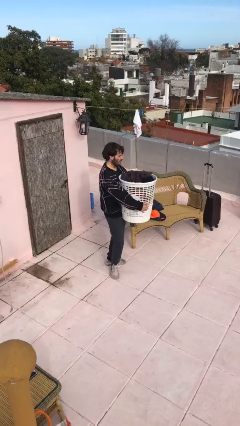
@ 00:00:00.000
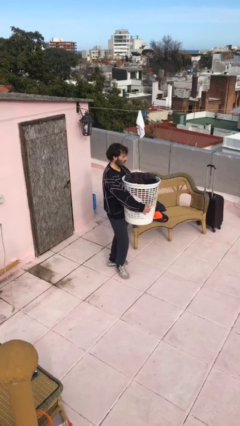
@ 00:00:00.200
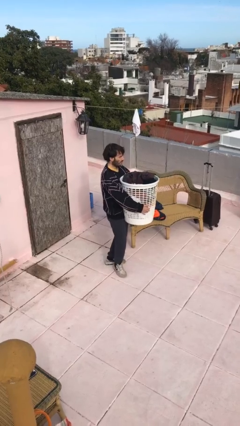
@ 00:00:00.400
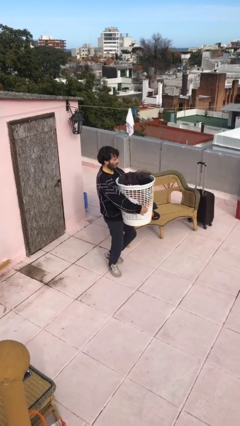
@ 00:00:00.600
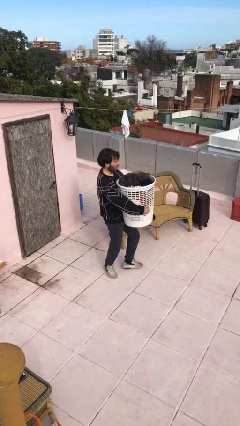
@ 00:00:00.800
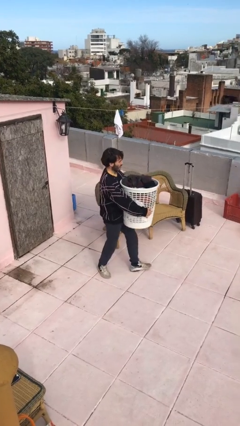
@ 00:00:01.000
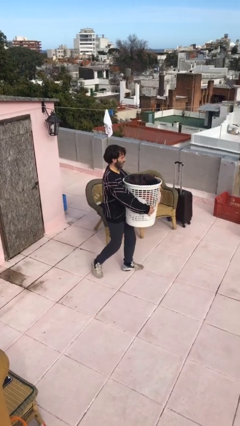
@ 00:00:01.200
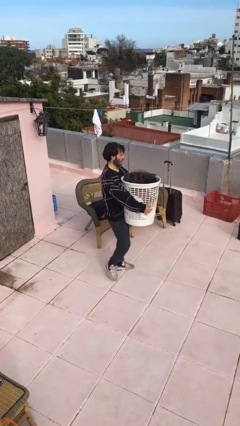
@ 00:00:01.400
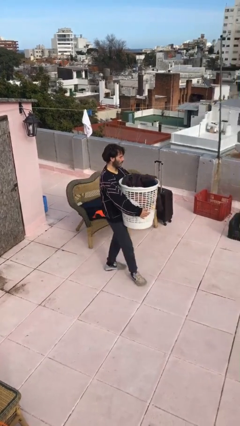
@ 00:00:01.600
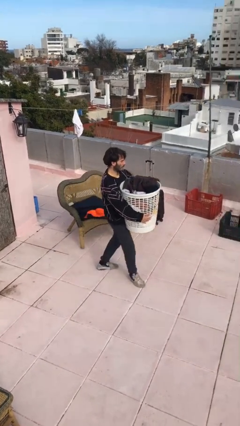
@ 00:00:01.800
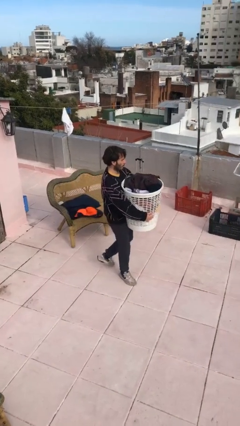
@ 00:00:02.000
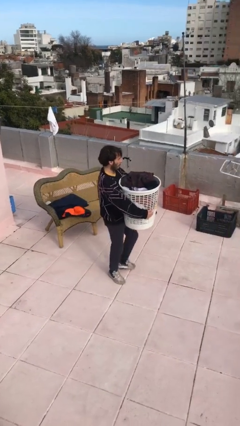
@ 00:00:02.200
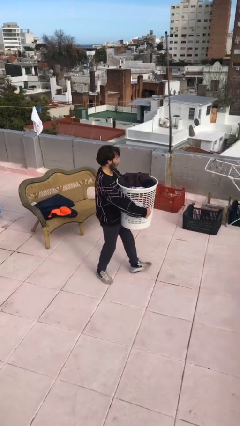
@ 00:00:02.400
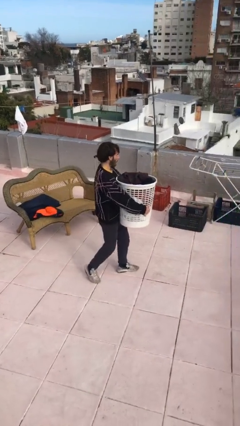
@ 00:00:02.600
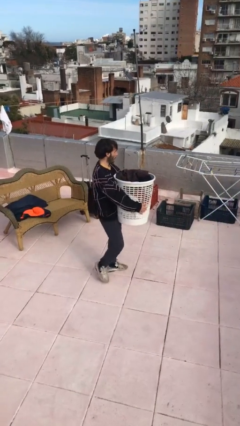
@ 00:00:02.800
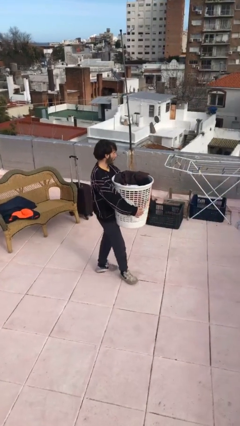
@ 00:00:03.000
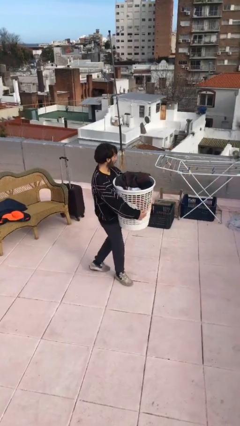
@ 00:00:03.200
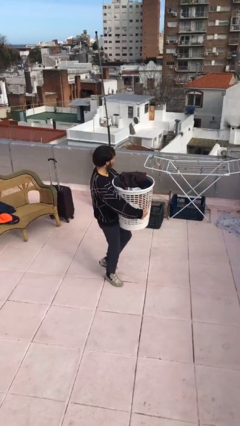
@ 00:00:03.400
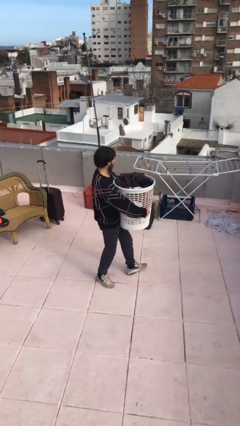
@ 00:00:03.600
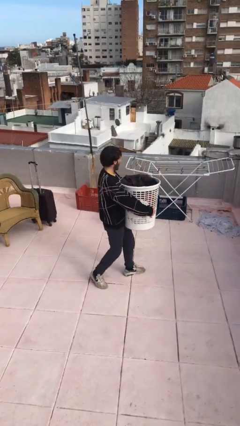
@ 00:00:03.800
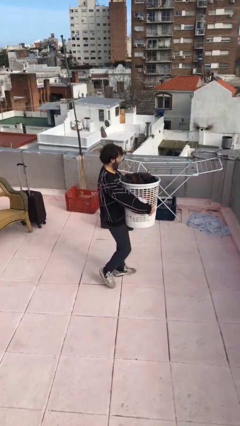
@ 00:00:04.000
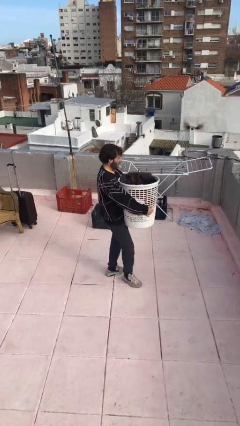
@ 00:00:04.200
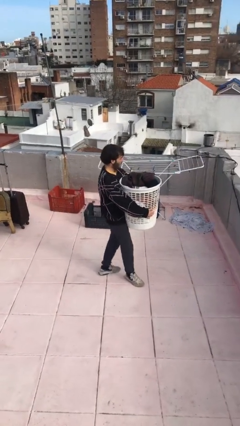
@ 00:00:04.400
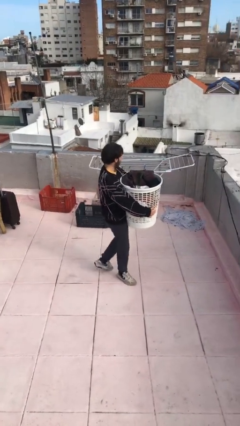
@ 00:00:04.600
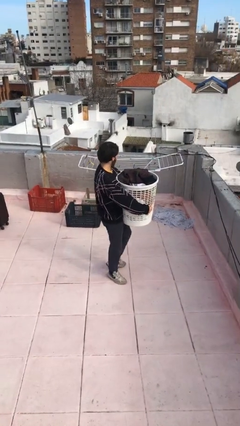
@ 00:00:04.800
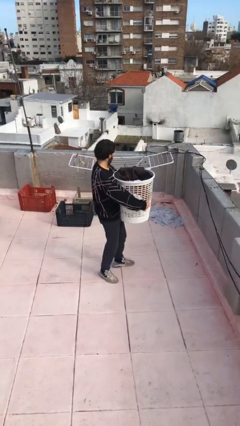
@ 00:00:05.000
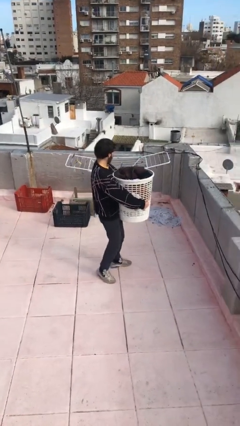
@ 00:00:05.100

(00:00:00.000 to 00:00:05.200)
person carries laundry basket

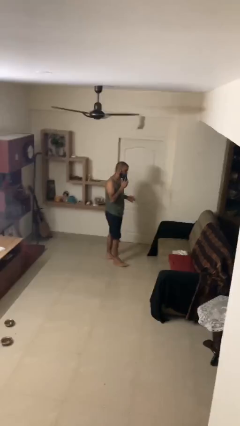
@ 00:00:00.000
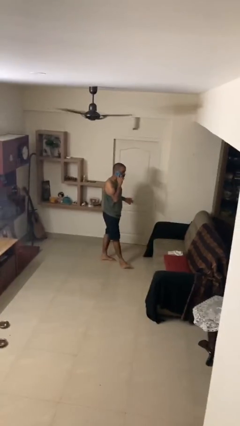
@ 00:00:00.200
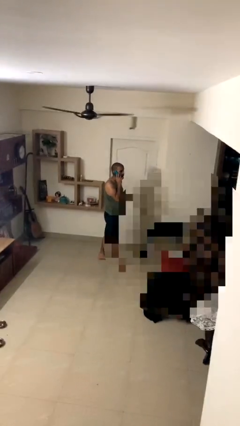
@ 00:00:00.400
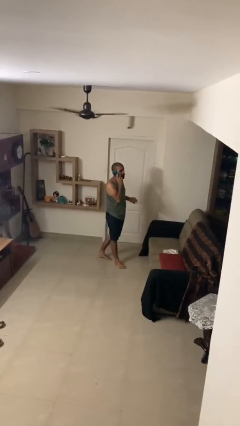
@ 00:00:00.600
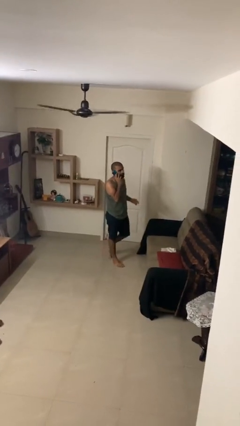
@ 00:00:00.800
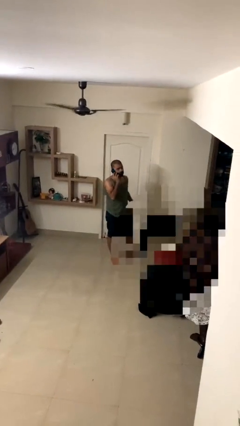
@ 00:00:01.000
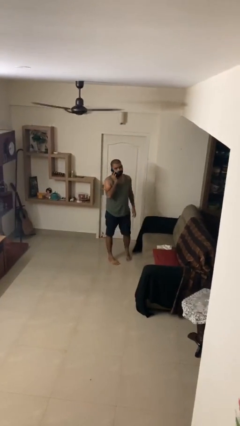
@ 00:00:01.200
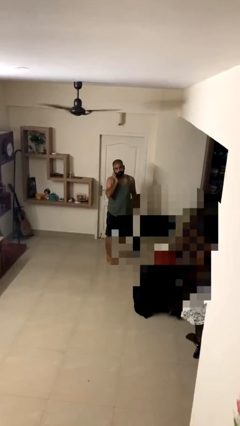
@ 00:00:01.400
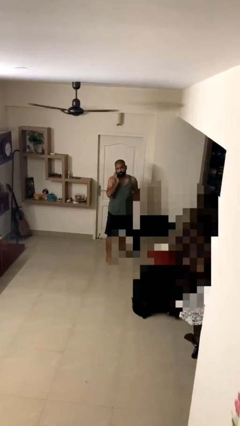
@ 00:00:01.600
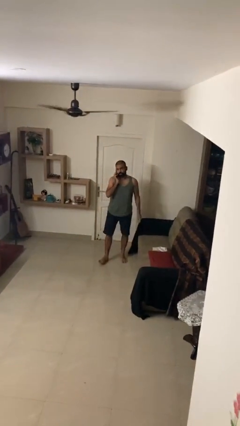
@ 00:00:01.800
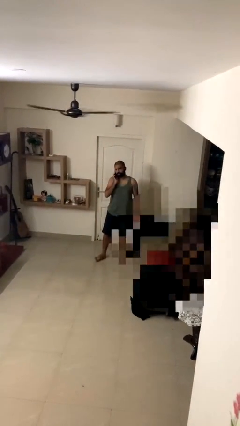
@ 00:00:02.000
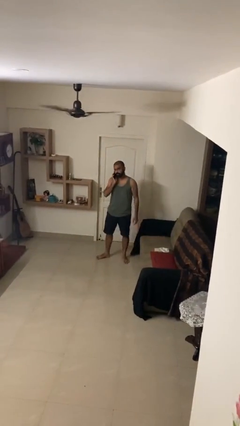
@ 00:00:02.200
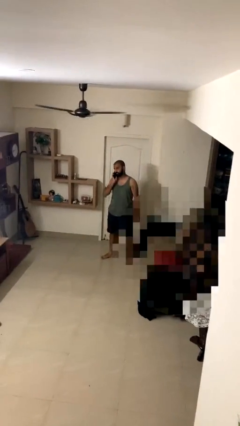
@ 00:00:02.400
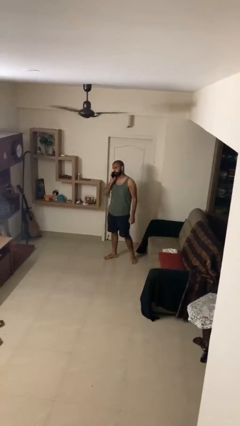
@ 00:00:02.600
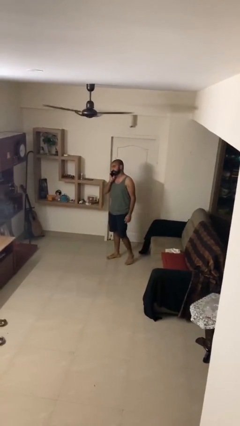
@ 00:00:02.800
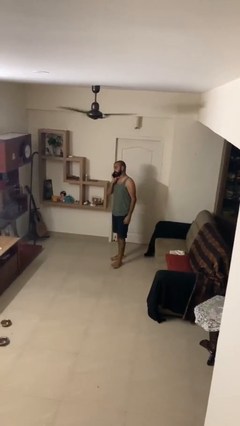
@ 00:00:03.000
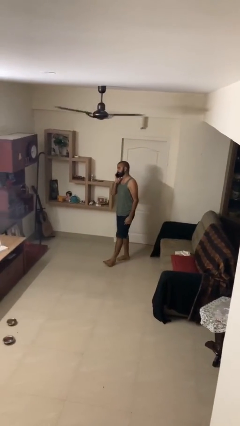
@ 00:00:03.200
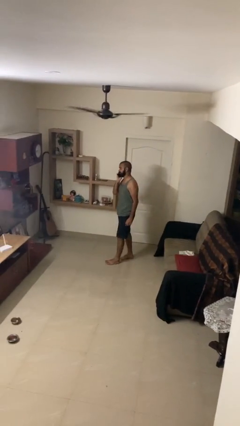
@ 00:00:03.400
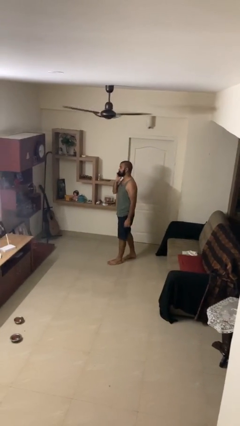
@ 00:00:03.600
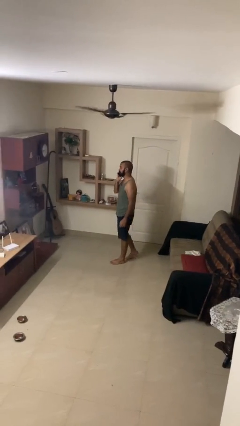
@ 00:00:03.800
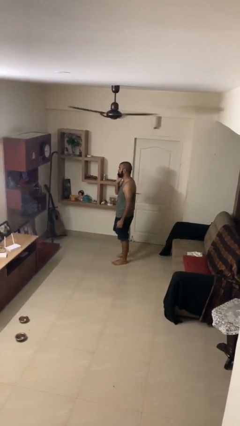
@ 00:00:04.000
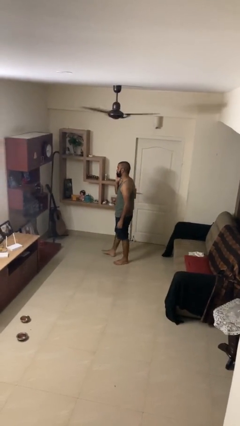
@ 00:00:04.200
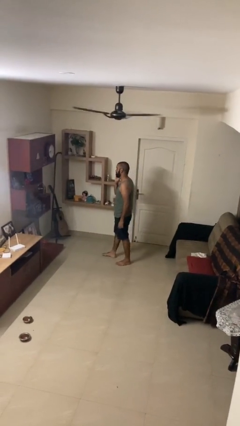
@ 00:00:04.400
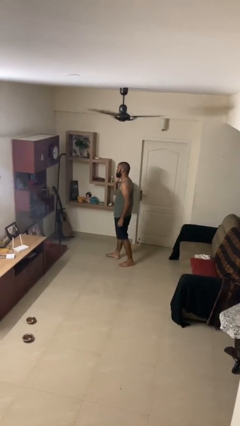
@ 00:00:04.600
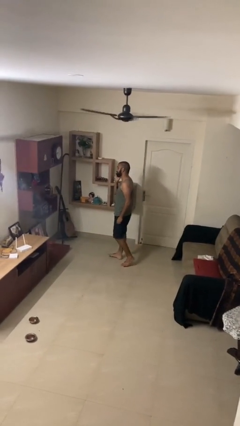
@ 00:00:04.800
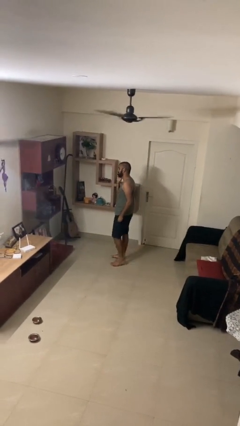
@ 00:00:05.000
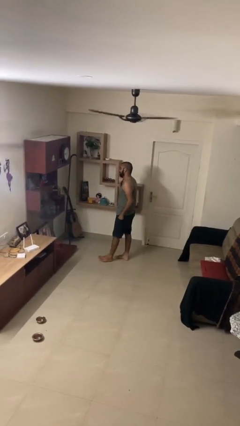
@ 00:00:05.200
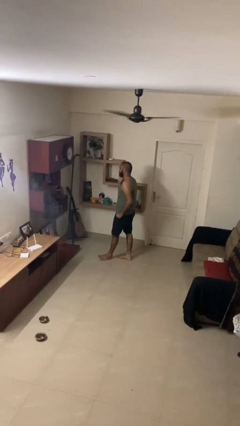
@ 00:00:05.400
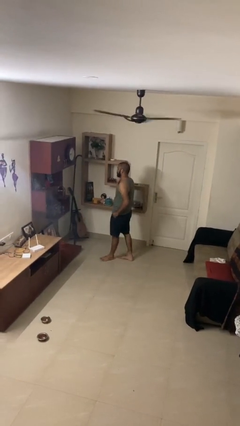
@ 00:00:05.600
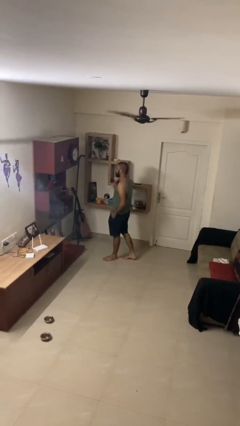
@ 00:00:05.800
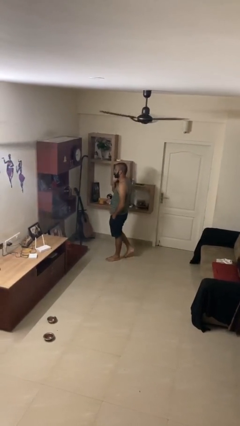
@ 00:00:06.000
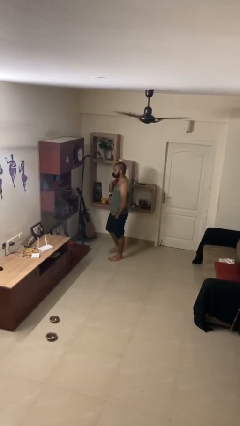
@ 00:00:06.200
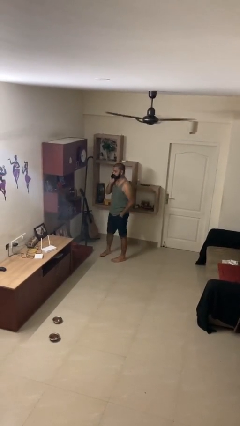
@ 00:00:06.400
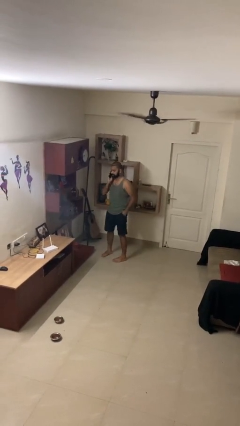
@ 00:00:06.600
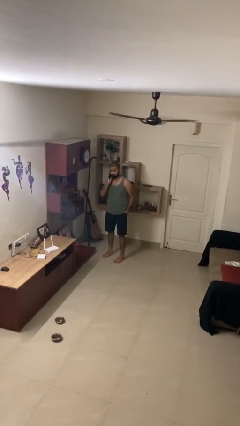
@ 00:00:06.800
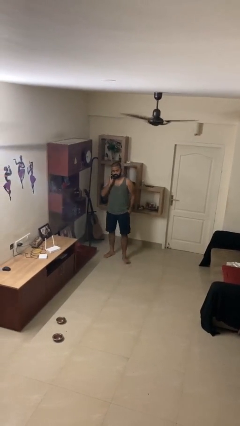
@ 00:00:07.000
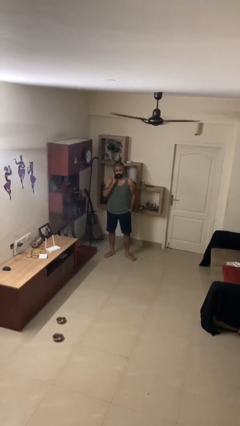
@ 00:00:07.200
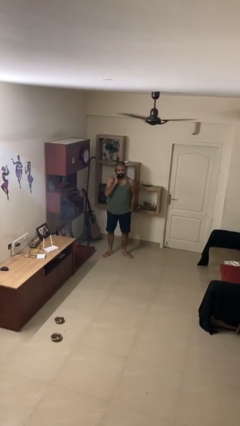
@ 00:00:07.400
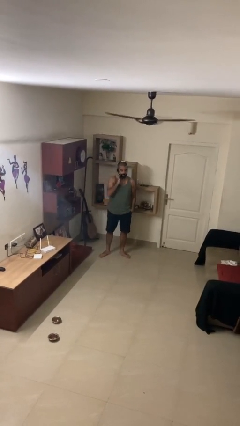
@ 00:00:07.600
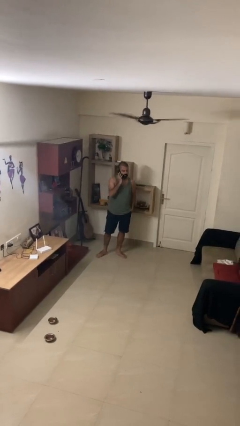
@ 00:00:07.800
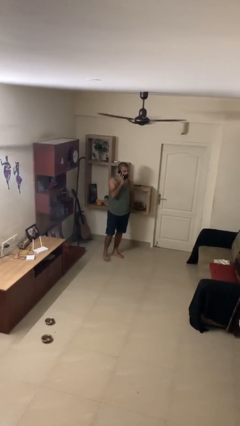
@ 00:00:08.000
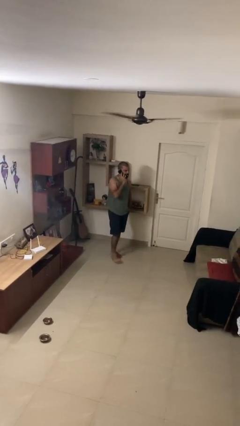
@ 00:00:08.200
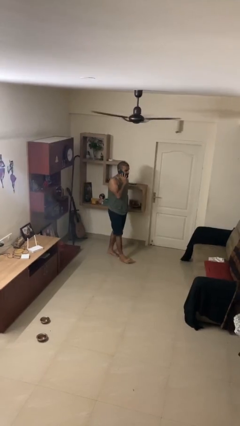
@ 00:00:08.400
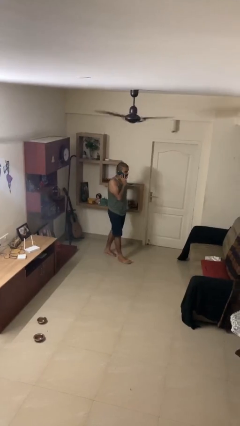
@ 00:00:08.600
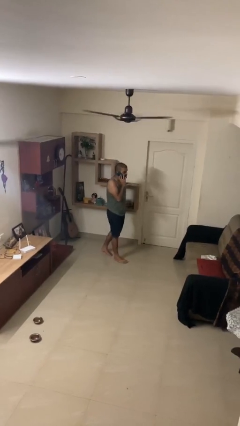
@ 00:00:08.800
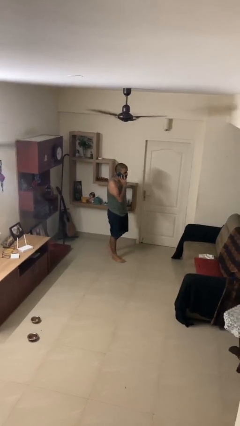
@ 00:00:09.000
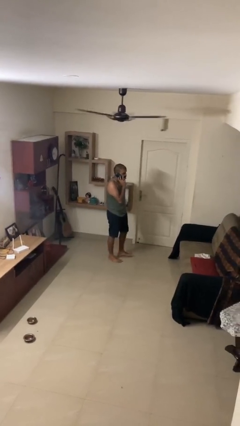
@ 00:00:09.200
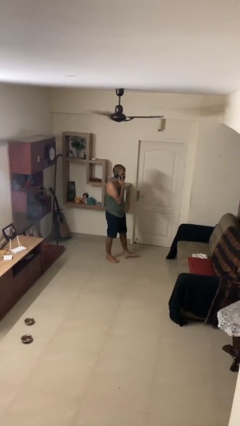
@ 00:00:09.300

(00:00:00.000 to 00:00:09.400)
person talks on phone

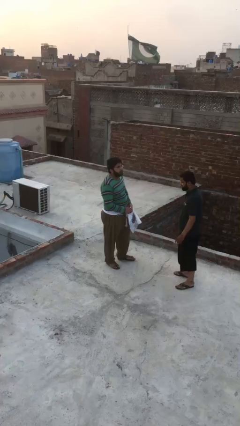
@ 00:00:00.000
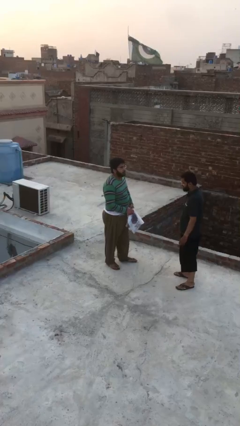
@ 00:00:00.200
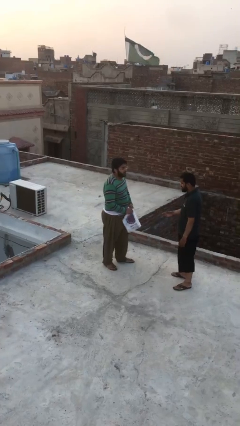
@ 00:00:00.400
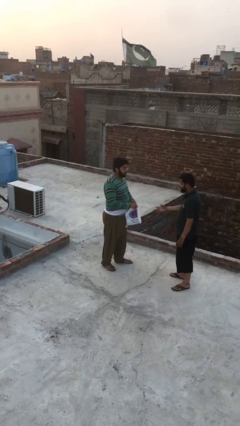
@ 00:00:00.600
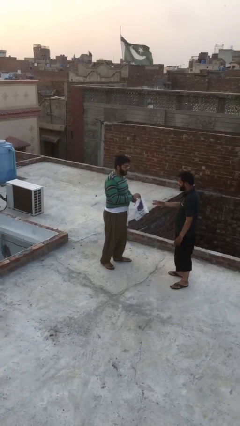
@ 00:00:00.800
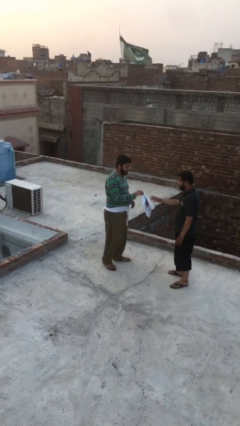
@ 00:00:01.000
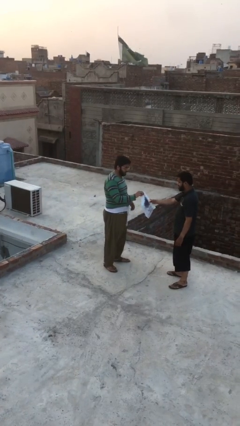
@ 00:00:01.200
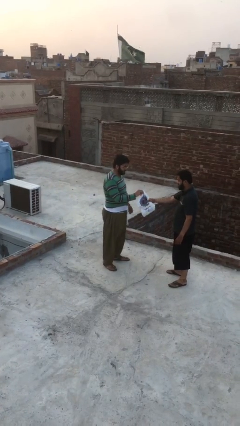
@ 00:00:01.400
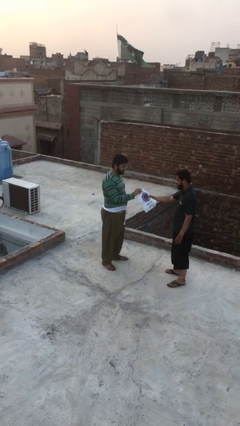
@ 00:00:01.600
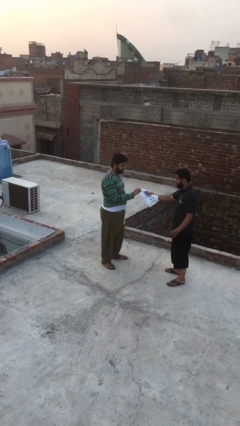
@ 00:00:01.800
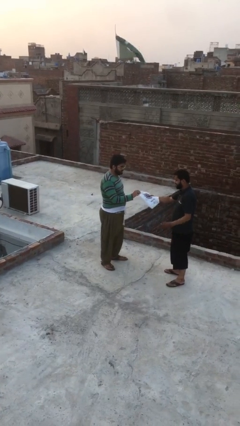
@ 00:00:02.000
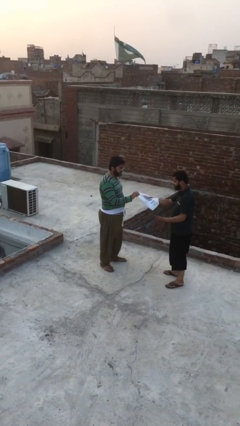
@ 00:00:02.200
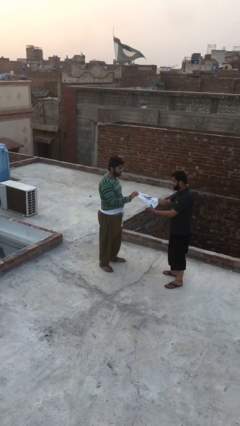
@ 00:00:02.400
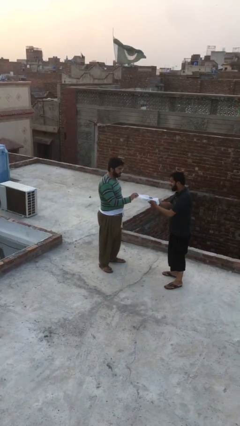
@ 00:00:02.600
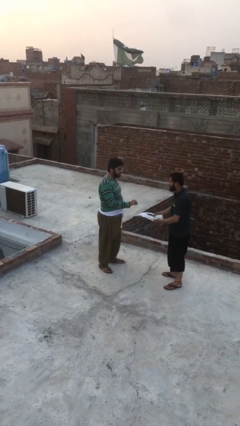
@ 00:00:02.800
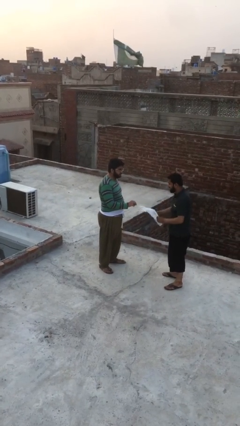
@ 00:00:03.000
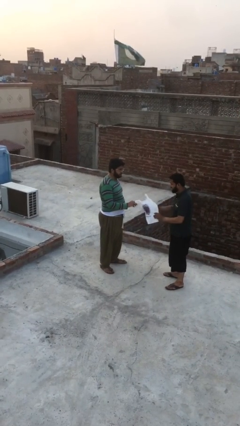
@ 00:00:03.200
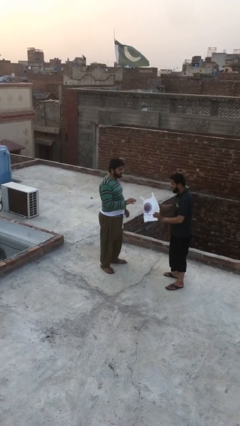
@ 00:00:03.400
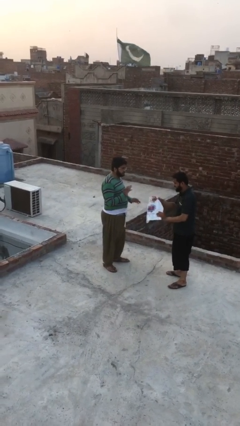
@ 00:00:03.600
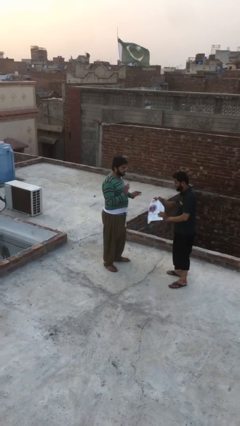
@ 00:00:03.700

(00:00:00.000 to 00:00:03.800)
person transfers object to person
